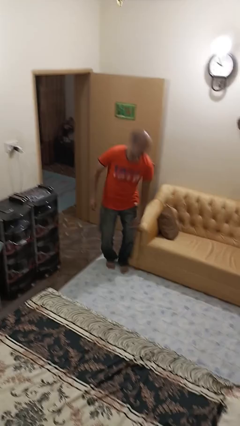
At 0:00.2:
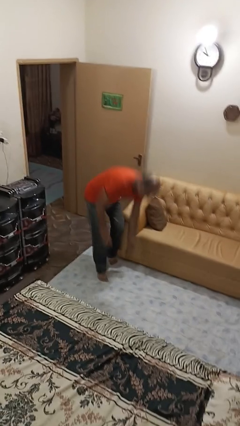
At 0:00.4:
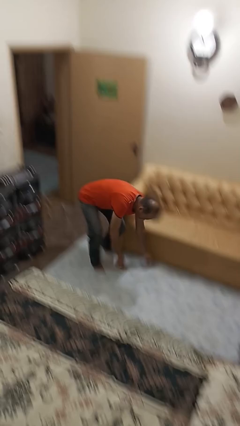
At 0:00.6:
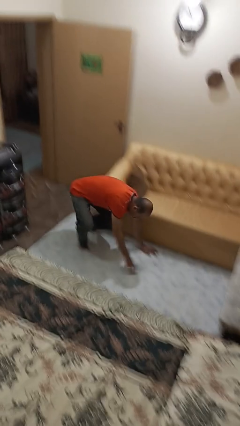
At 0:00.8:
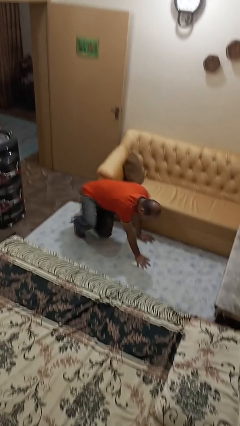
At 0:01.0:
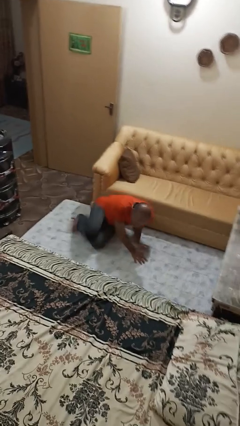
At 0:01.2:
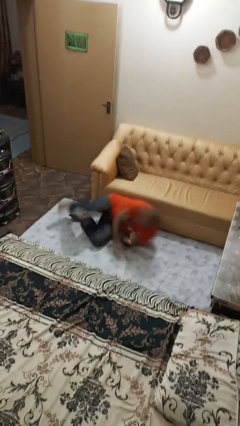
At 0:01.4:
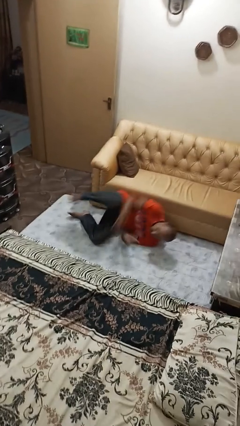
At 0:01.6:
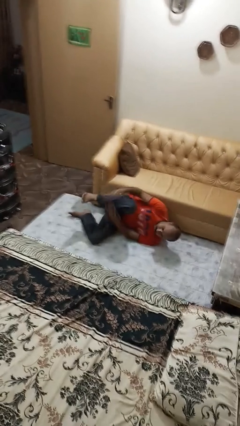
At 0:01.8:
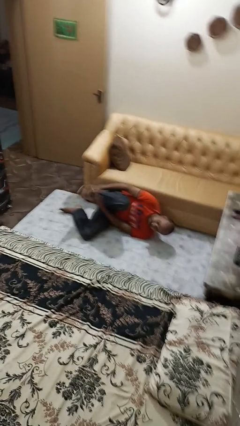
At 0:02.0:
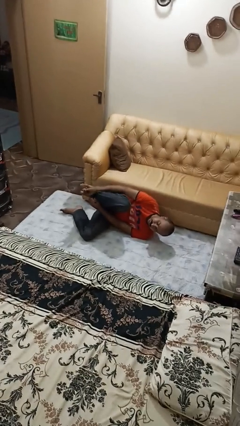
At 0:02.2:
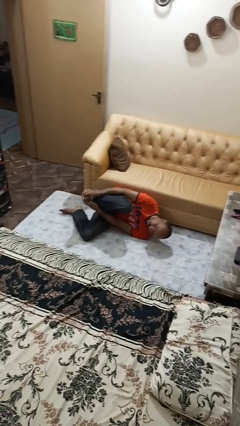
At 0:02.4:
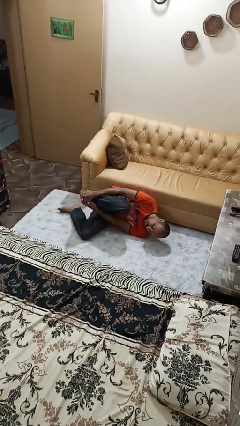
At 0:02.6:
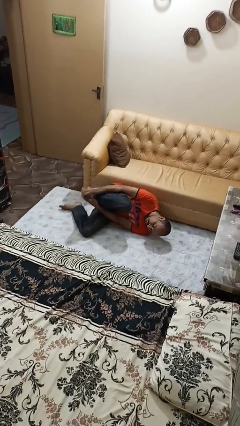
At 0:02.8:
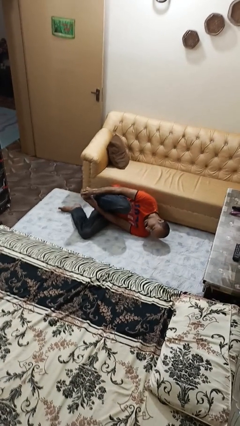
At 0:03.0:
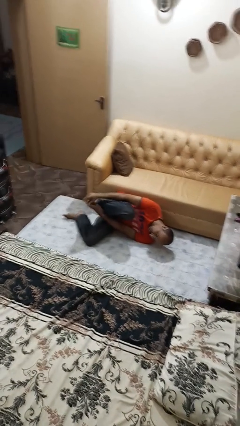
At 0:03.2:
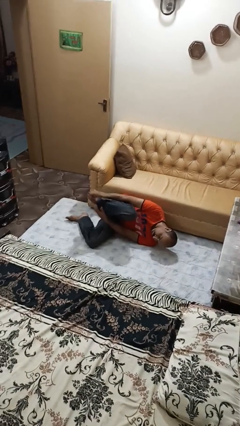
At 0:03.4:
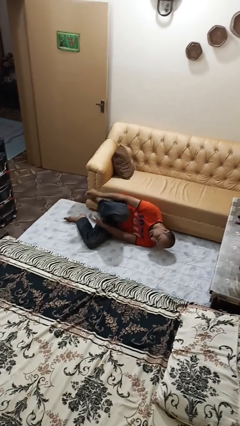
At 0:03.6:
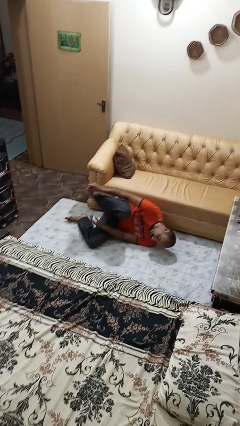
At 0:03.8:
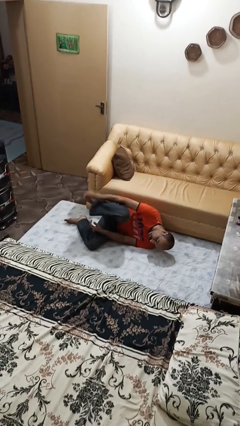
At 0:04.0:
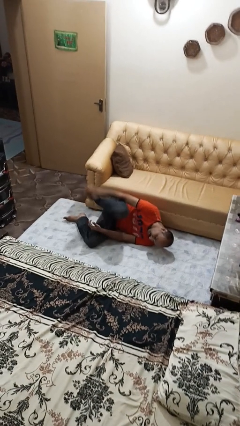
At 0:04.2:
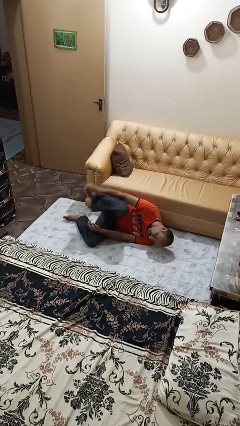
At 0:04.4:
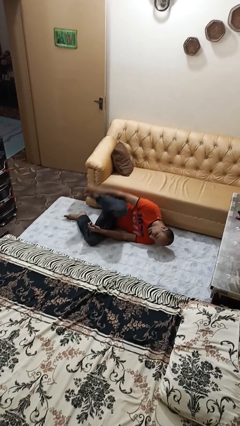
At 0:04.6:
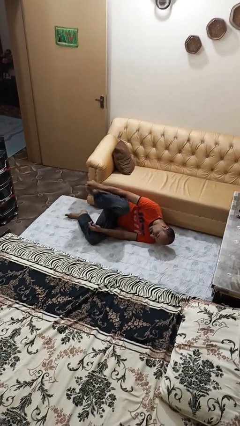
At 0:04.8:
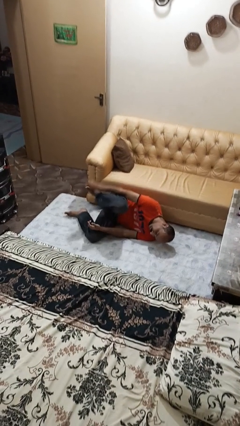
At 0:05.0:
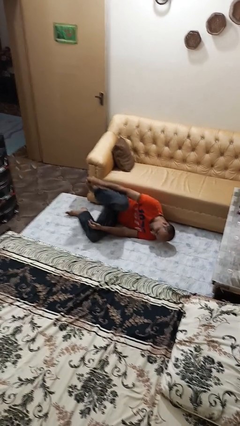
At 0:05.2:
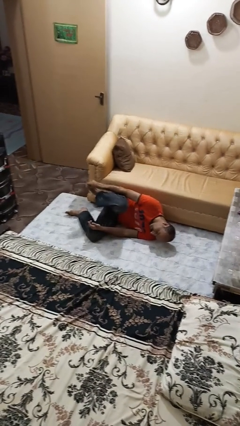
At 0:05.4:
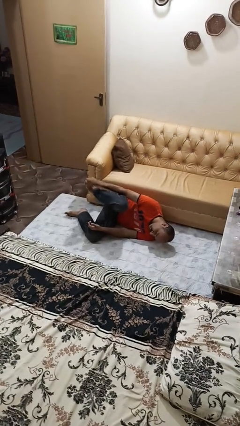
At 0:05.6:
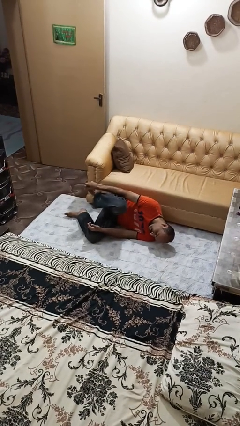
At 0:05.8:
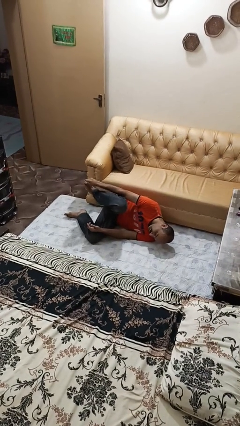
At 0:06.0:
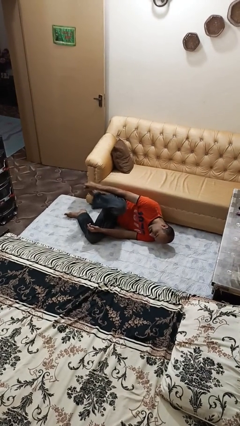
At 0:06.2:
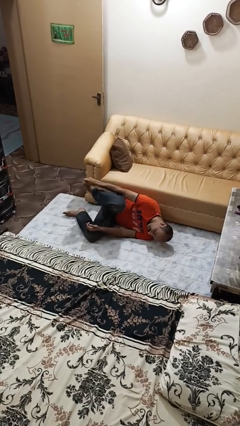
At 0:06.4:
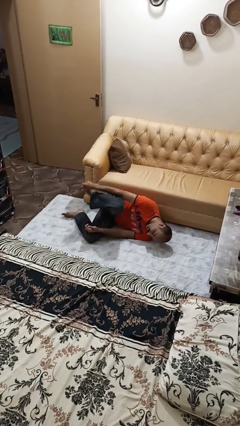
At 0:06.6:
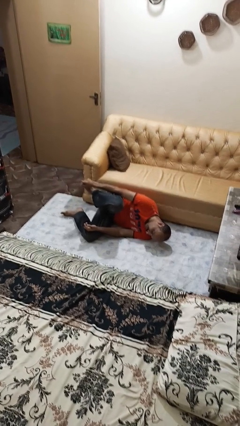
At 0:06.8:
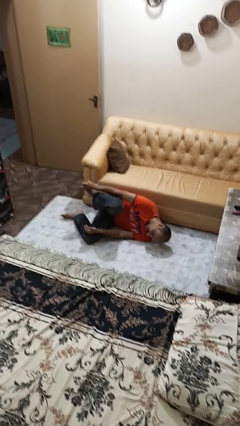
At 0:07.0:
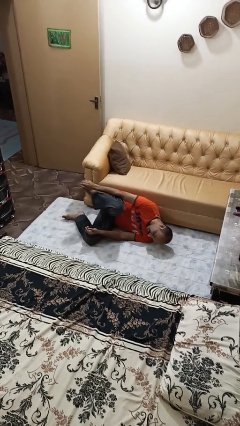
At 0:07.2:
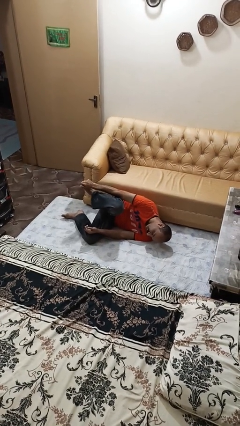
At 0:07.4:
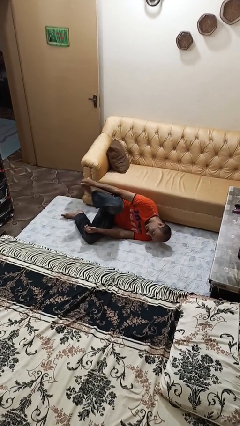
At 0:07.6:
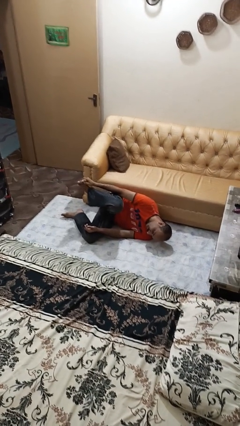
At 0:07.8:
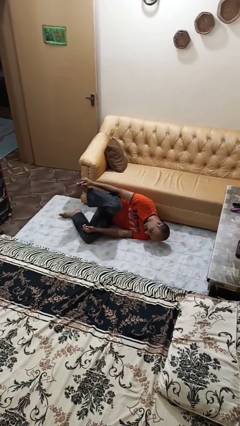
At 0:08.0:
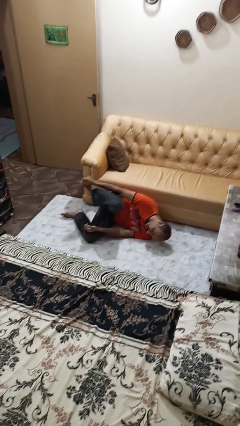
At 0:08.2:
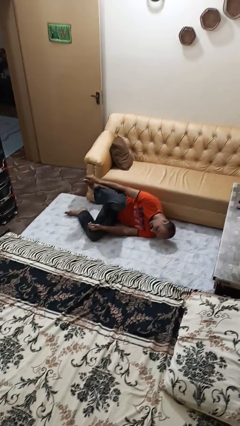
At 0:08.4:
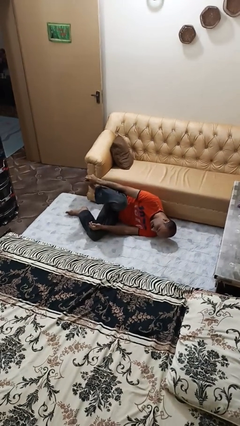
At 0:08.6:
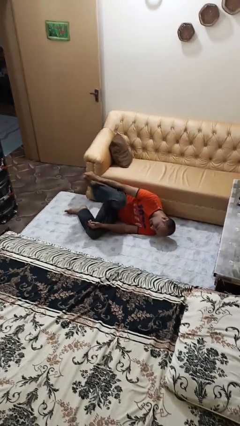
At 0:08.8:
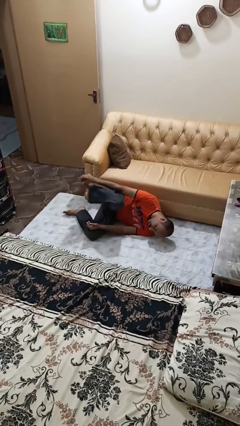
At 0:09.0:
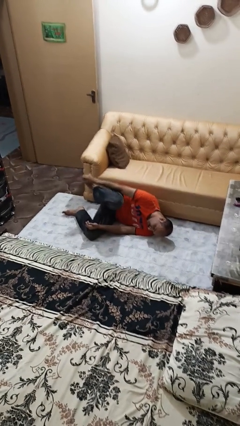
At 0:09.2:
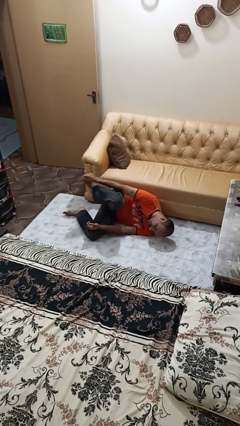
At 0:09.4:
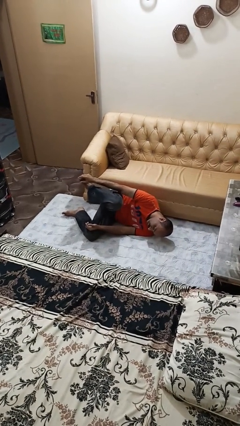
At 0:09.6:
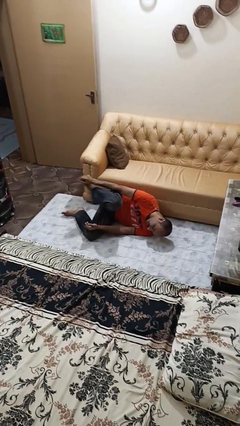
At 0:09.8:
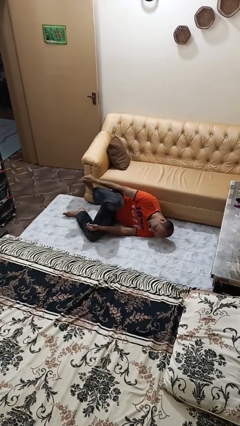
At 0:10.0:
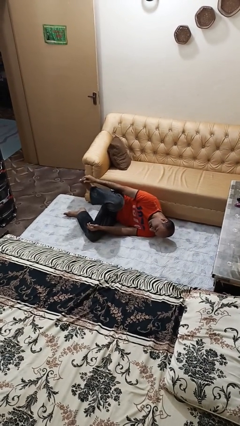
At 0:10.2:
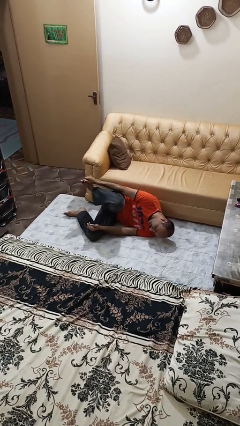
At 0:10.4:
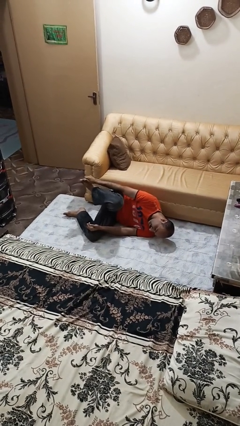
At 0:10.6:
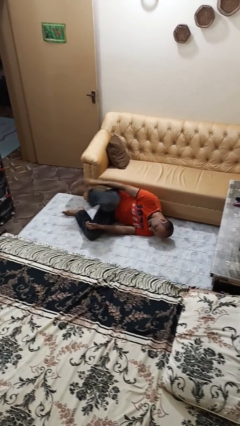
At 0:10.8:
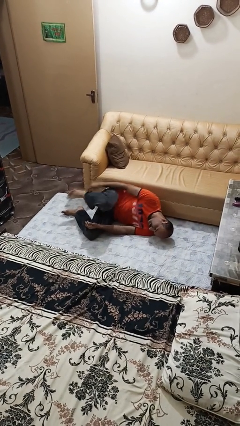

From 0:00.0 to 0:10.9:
person lies down on floor

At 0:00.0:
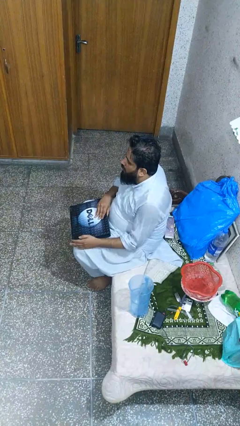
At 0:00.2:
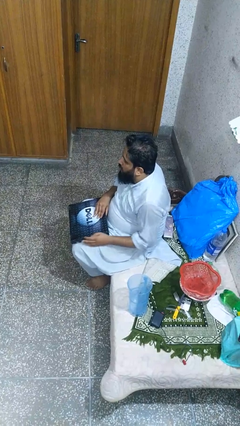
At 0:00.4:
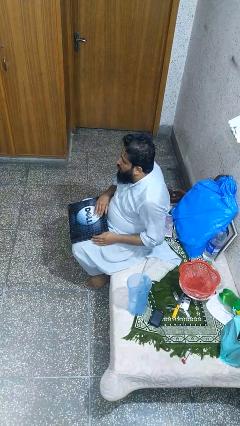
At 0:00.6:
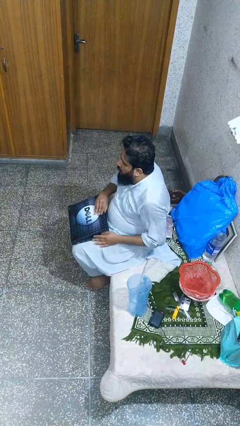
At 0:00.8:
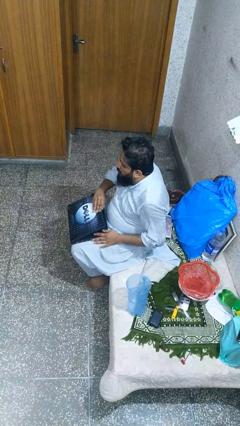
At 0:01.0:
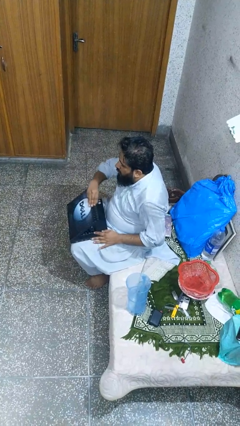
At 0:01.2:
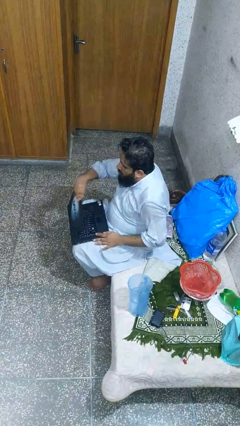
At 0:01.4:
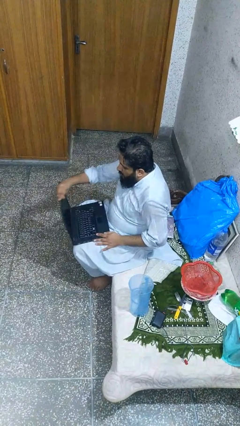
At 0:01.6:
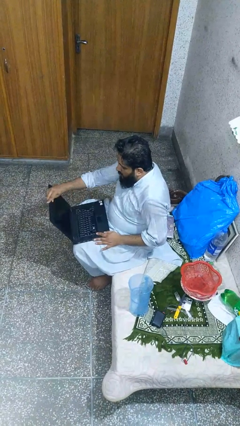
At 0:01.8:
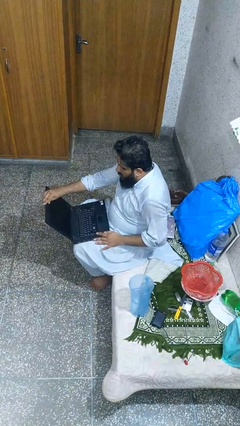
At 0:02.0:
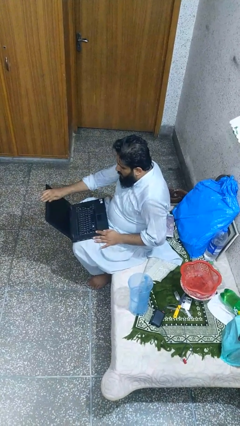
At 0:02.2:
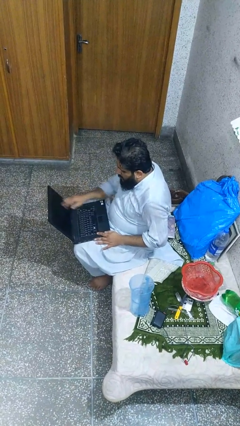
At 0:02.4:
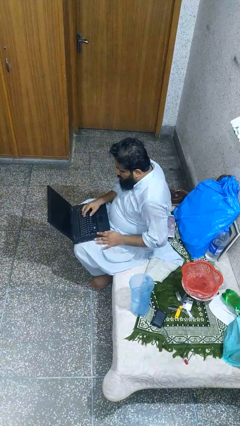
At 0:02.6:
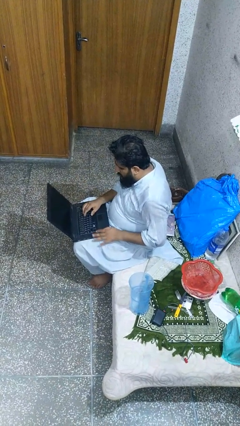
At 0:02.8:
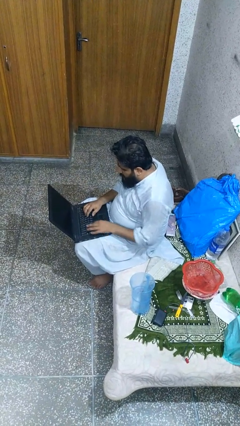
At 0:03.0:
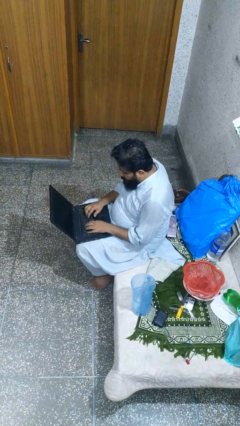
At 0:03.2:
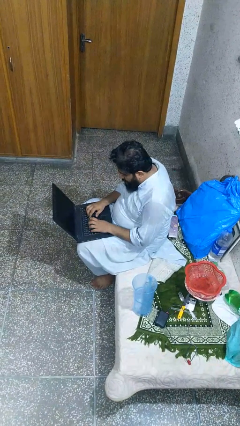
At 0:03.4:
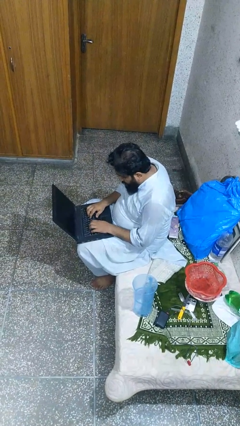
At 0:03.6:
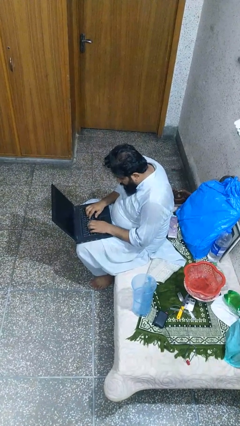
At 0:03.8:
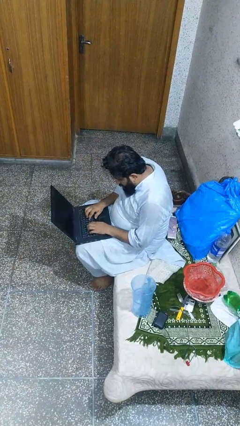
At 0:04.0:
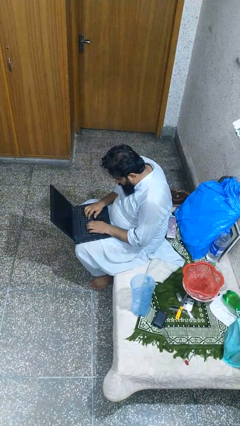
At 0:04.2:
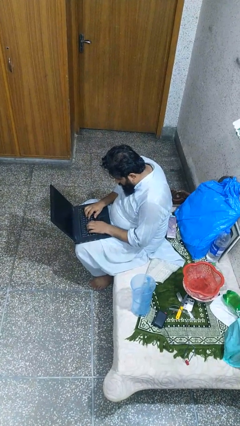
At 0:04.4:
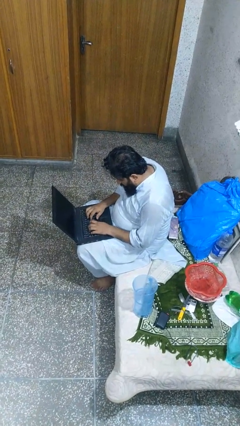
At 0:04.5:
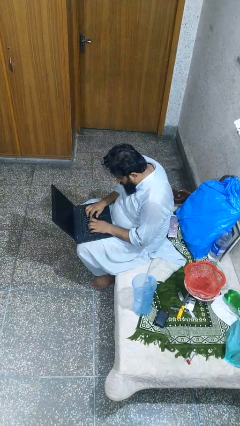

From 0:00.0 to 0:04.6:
person opens laptop

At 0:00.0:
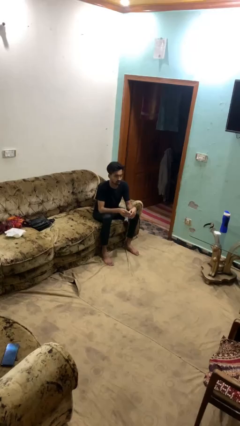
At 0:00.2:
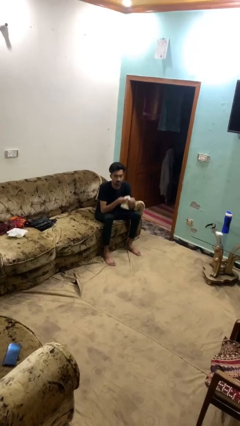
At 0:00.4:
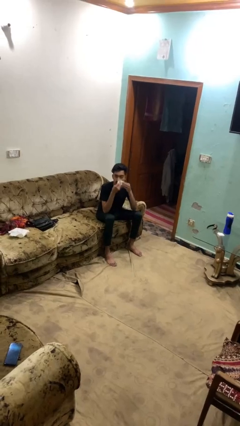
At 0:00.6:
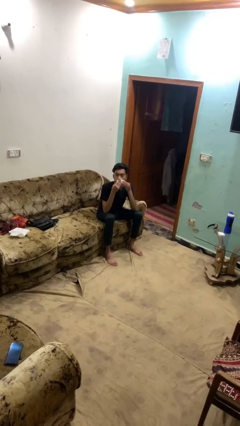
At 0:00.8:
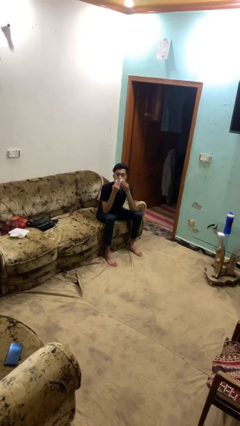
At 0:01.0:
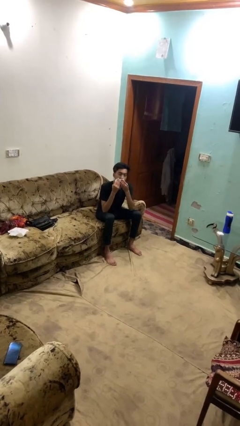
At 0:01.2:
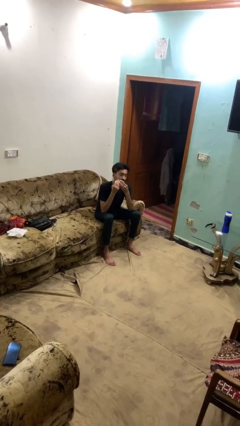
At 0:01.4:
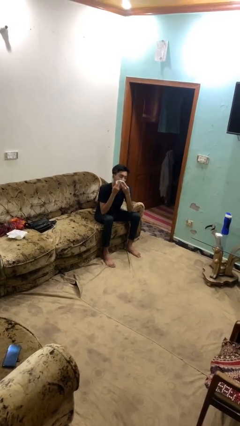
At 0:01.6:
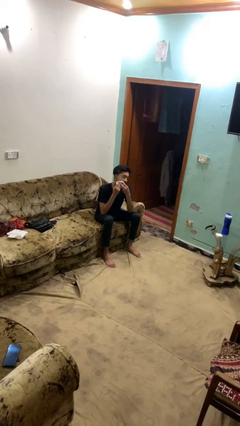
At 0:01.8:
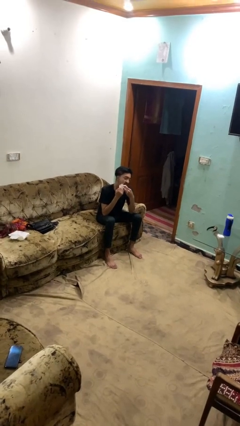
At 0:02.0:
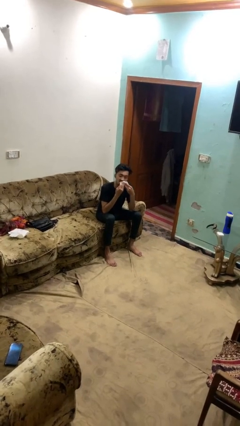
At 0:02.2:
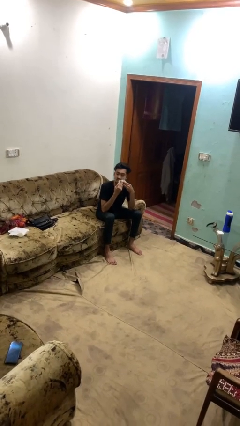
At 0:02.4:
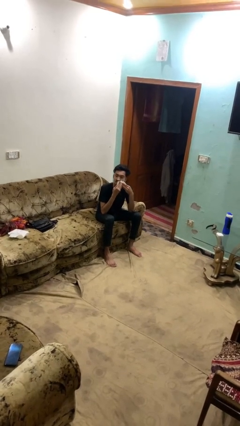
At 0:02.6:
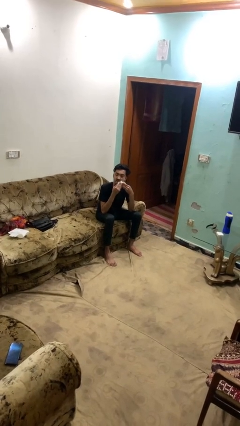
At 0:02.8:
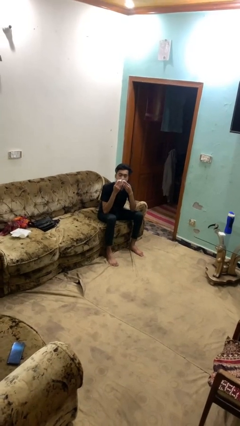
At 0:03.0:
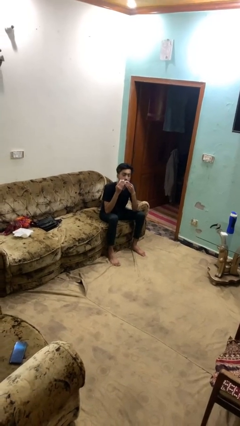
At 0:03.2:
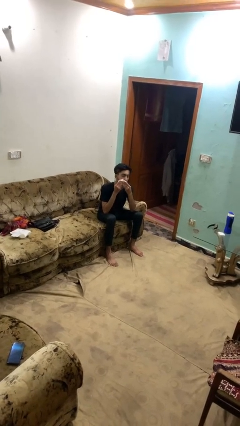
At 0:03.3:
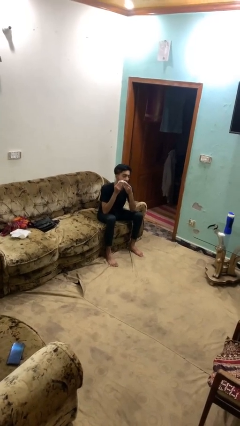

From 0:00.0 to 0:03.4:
person wipes mouth with napkin
